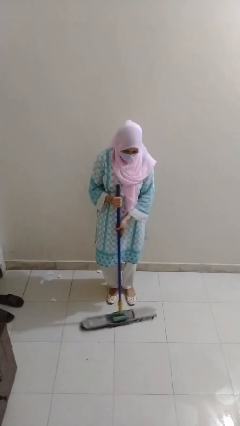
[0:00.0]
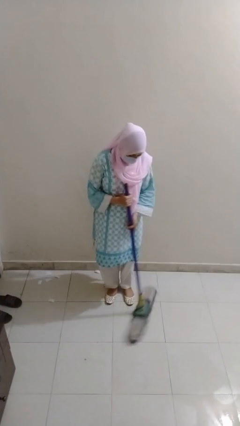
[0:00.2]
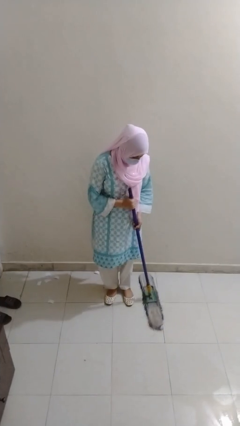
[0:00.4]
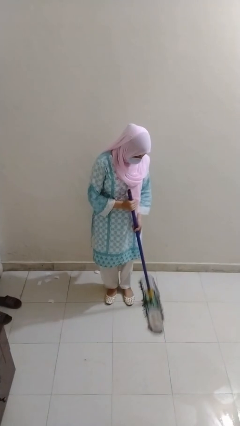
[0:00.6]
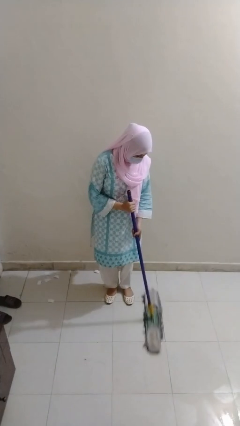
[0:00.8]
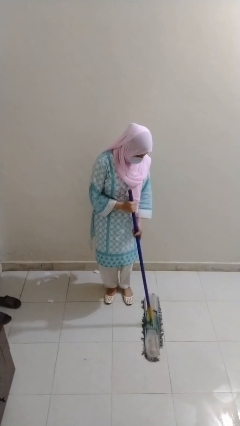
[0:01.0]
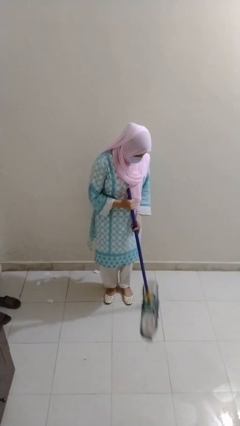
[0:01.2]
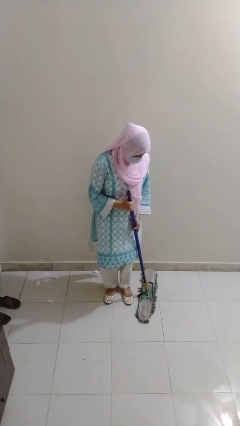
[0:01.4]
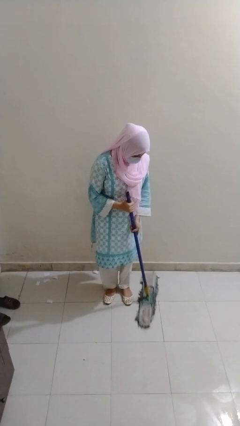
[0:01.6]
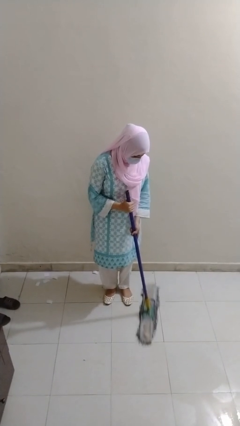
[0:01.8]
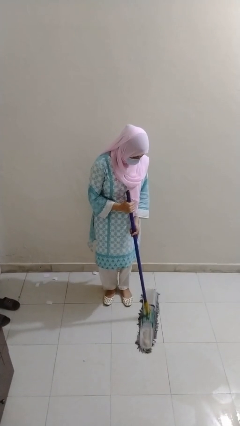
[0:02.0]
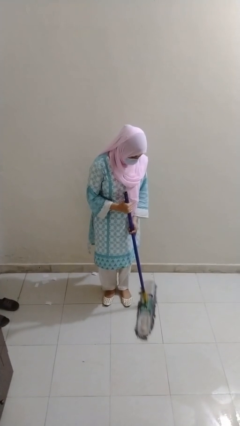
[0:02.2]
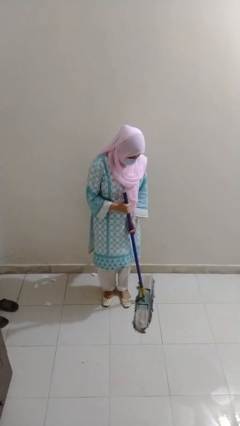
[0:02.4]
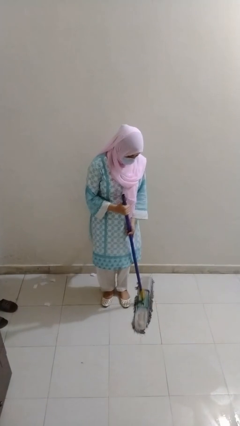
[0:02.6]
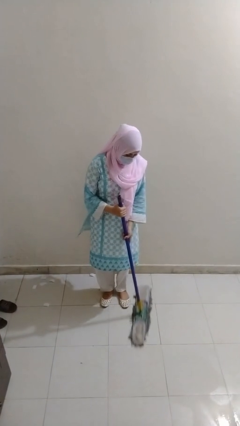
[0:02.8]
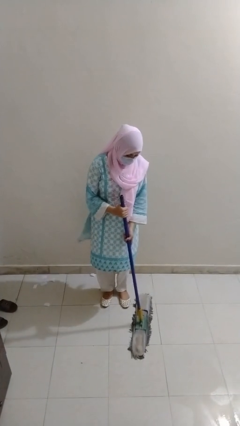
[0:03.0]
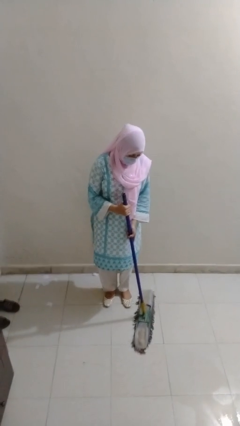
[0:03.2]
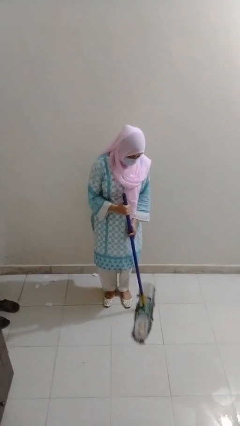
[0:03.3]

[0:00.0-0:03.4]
person mops

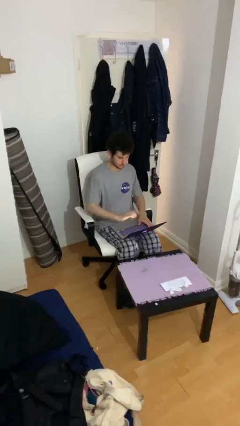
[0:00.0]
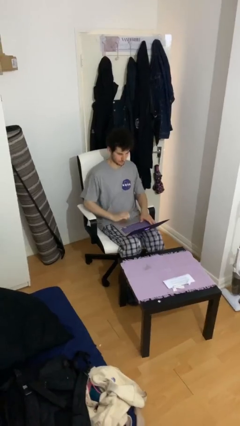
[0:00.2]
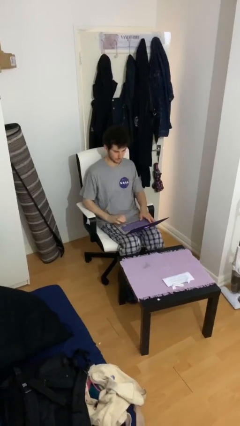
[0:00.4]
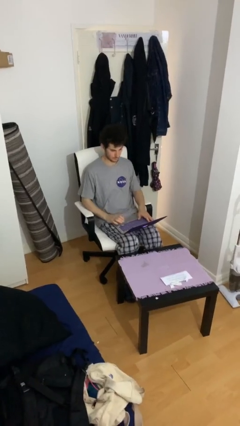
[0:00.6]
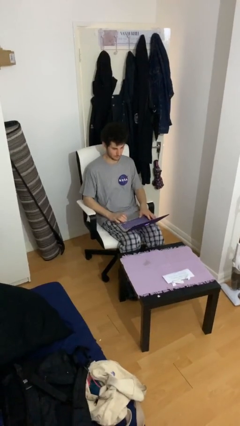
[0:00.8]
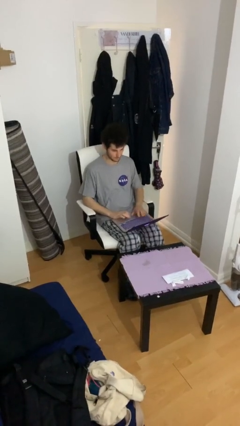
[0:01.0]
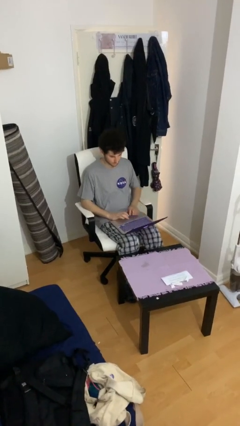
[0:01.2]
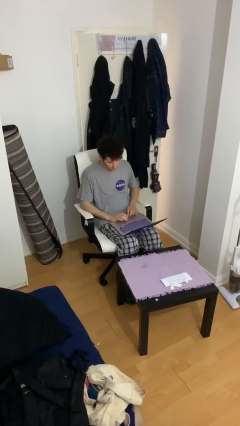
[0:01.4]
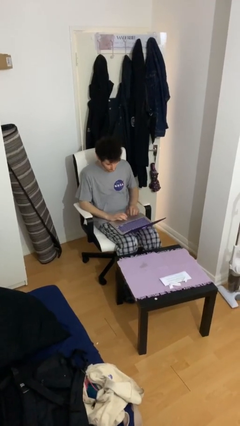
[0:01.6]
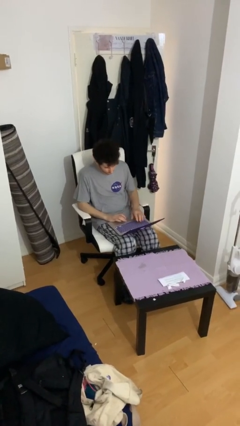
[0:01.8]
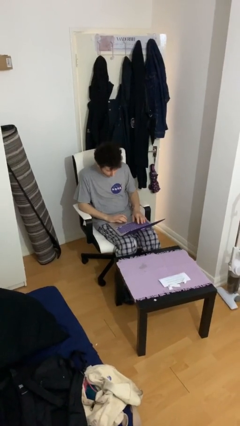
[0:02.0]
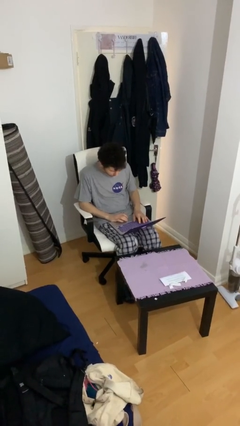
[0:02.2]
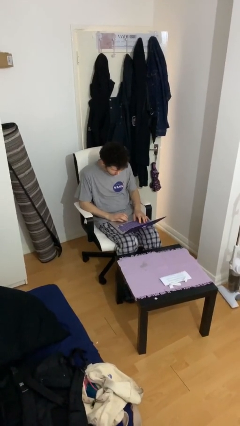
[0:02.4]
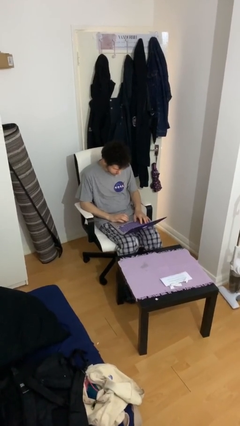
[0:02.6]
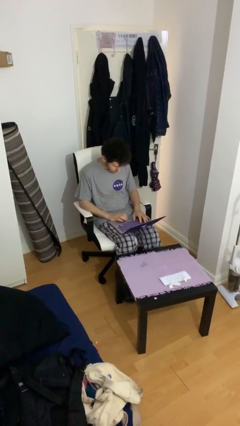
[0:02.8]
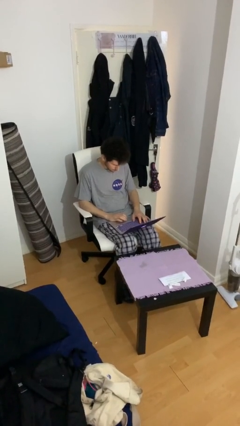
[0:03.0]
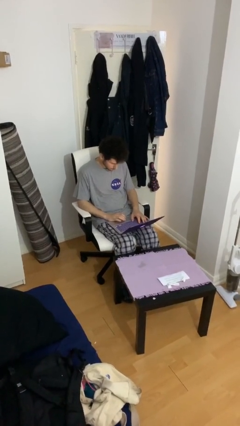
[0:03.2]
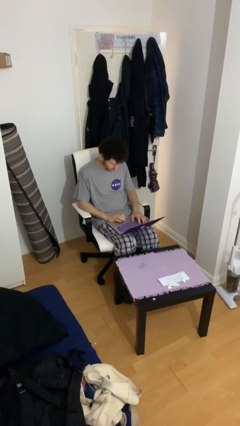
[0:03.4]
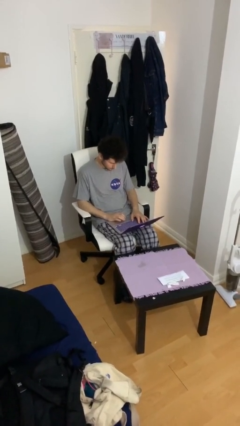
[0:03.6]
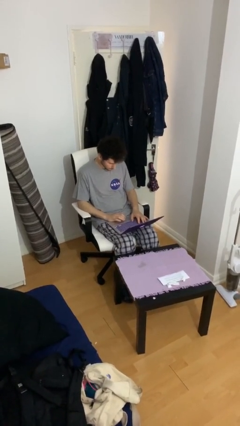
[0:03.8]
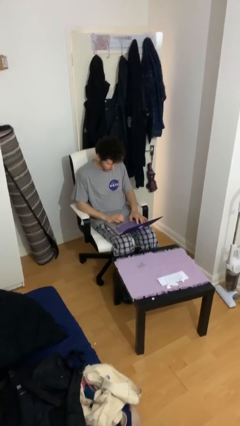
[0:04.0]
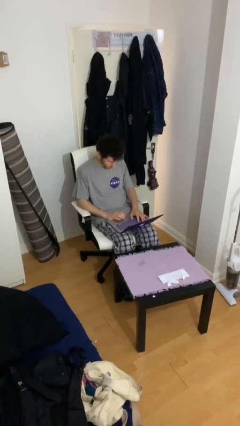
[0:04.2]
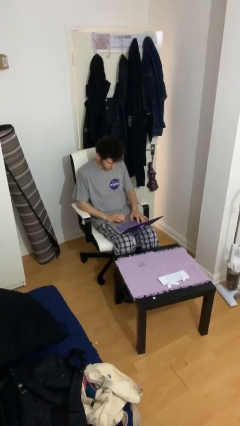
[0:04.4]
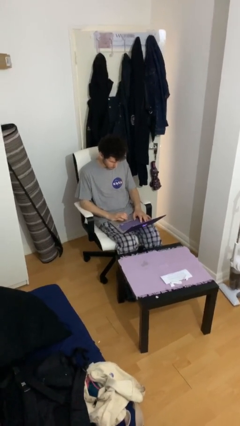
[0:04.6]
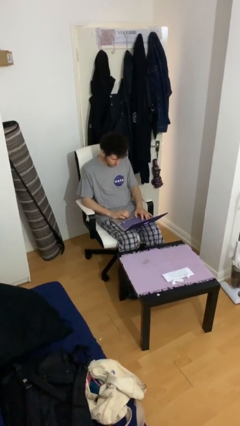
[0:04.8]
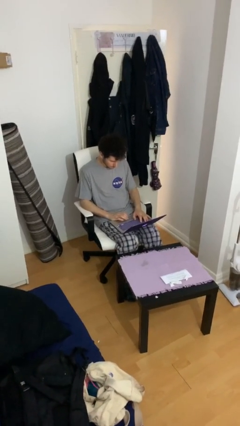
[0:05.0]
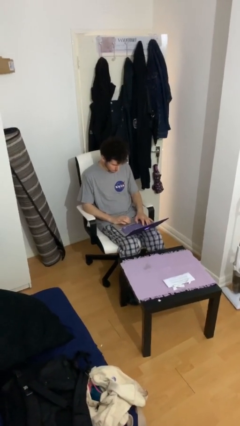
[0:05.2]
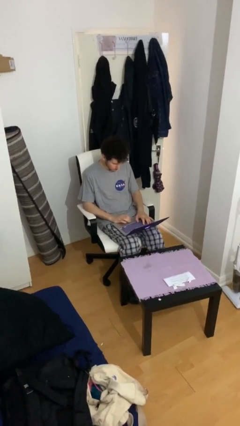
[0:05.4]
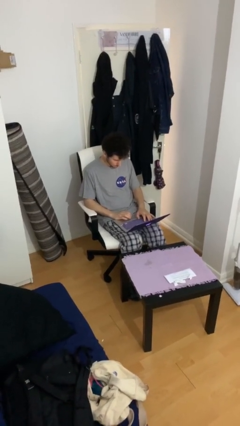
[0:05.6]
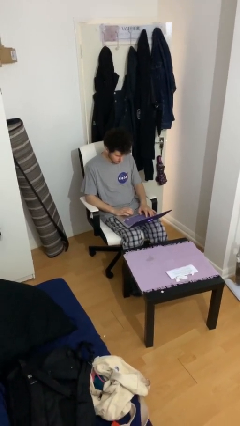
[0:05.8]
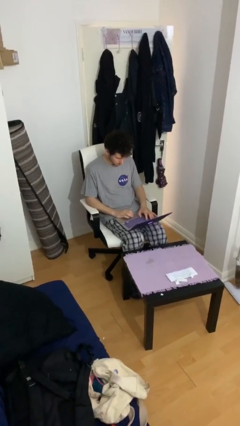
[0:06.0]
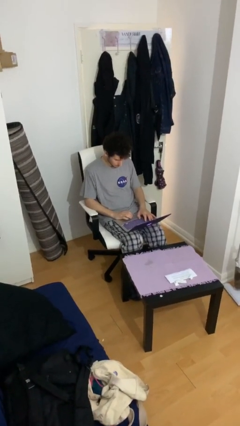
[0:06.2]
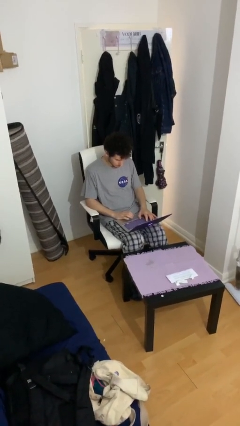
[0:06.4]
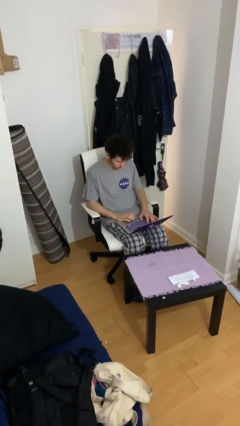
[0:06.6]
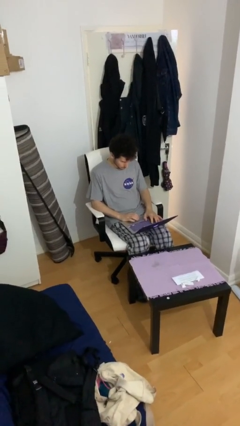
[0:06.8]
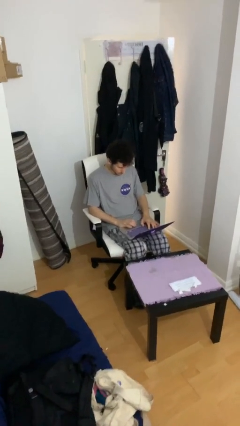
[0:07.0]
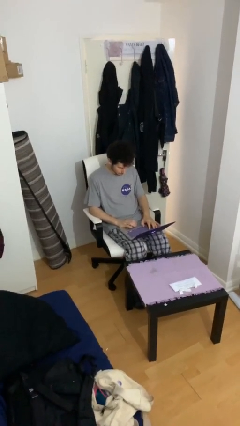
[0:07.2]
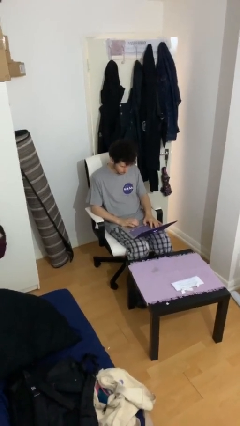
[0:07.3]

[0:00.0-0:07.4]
person interacts with laptop

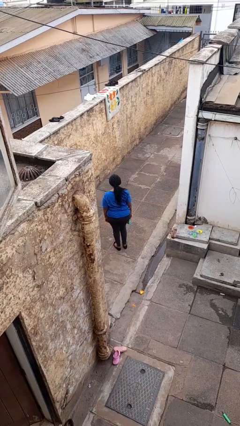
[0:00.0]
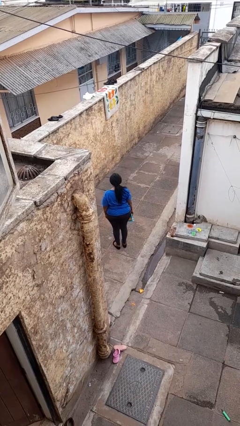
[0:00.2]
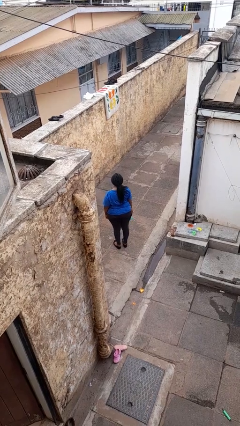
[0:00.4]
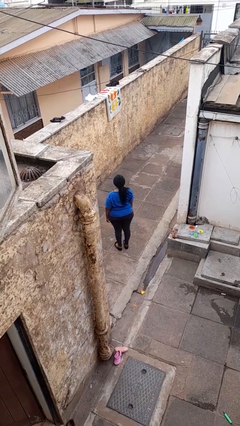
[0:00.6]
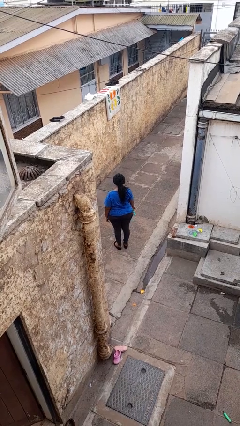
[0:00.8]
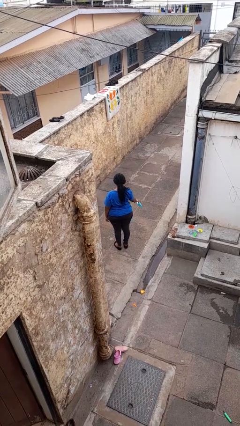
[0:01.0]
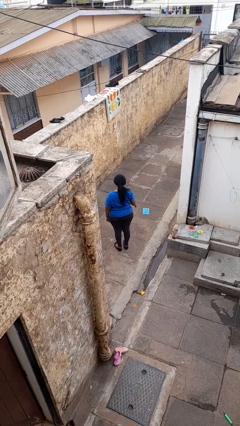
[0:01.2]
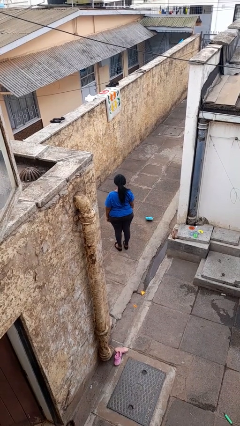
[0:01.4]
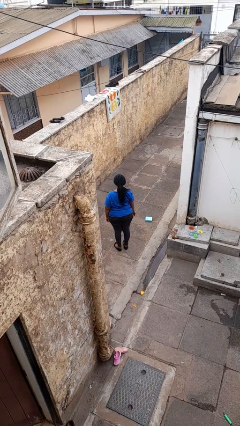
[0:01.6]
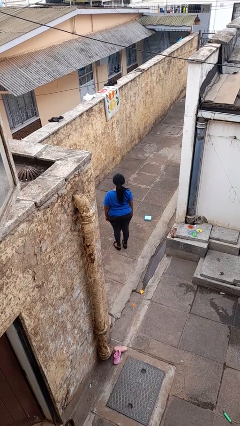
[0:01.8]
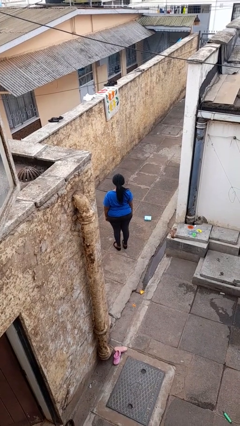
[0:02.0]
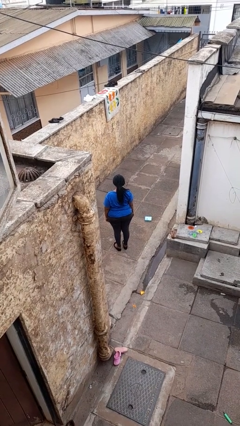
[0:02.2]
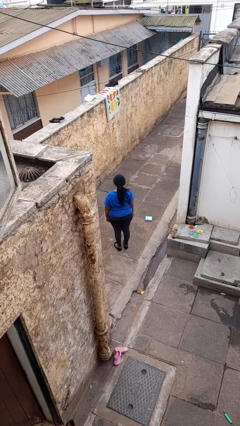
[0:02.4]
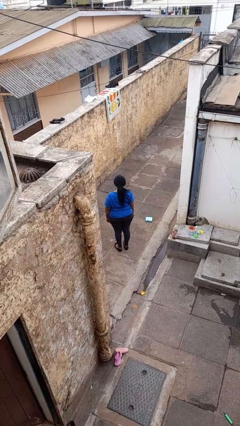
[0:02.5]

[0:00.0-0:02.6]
person throws object to ground

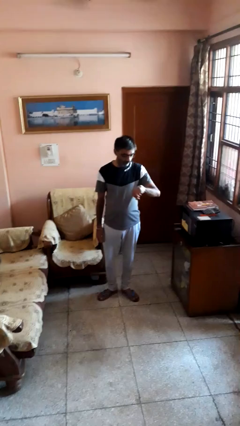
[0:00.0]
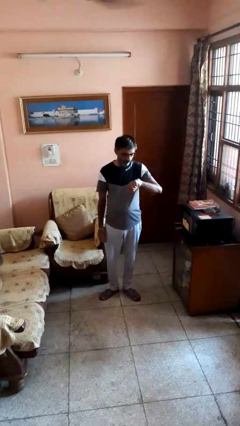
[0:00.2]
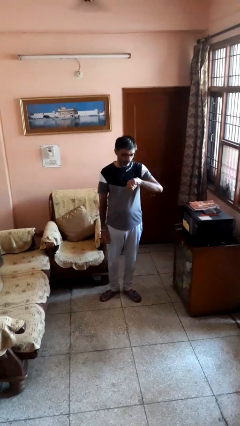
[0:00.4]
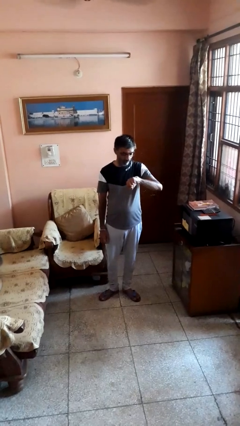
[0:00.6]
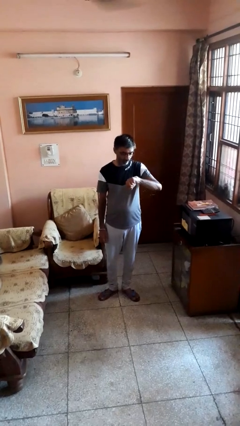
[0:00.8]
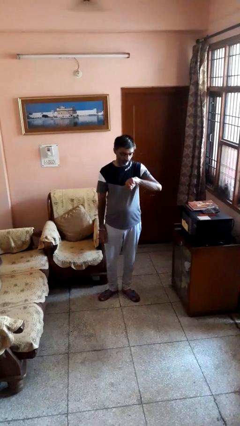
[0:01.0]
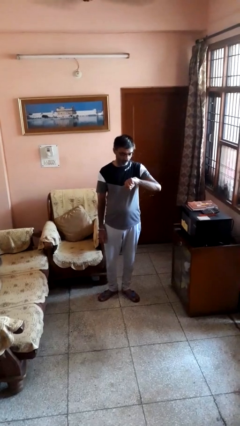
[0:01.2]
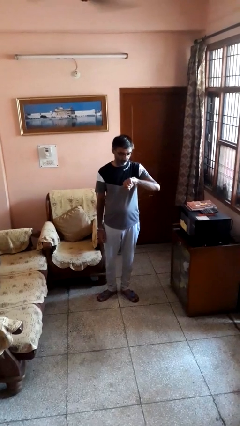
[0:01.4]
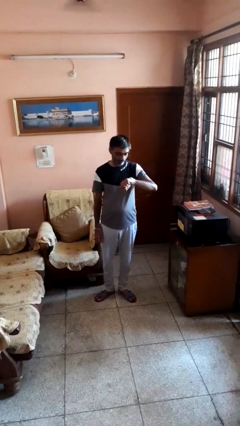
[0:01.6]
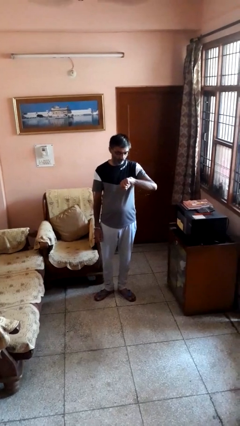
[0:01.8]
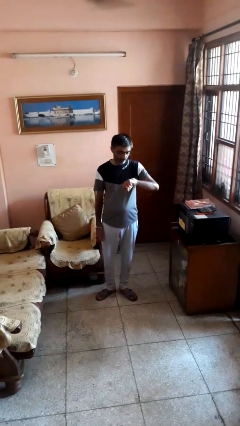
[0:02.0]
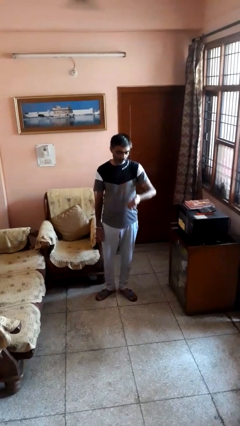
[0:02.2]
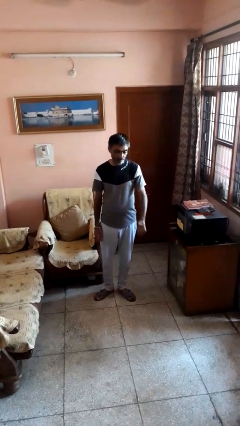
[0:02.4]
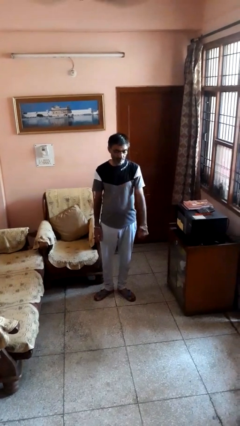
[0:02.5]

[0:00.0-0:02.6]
person looks at wristwatch

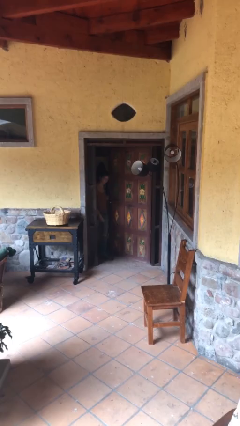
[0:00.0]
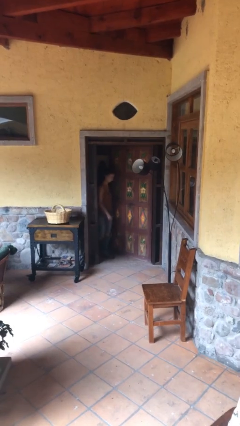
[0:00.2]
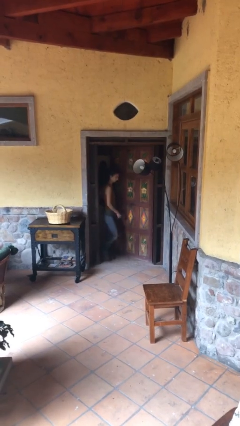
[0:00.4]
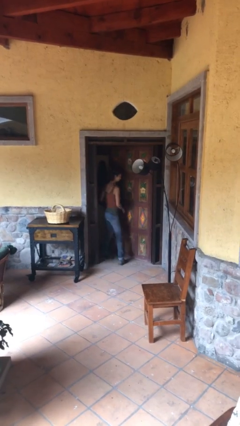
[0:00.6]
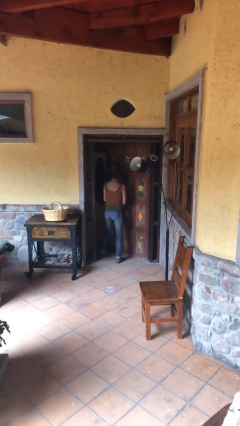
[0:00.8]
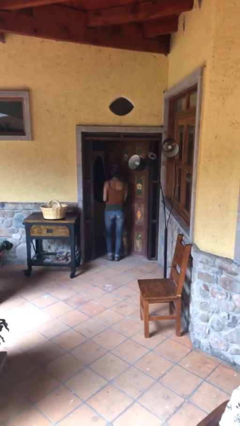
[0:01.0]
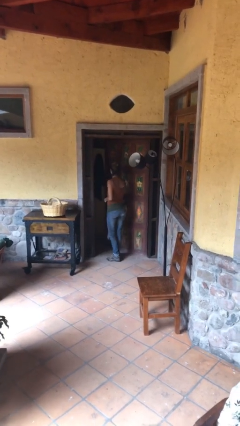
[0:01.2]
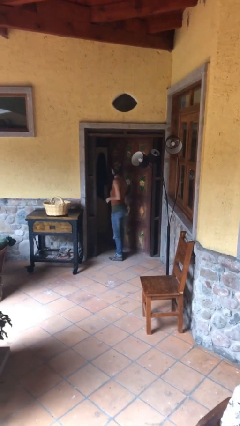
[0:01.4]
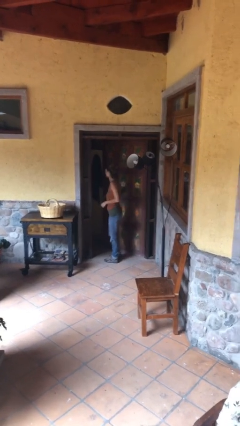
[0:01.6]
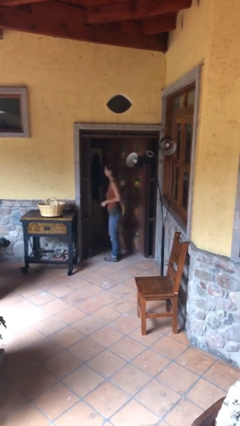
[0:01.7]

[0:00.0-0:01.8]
person enters scene through structure
